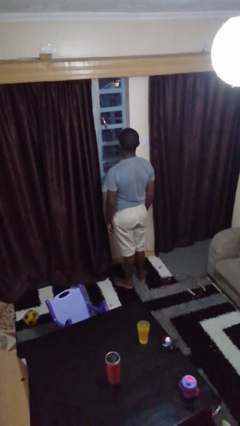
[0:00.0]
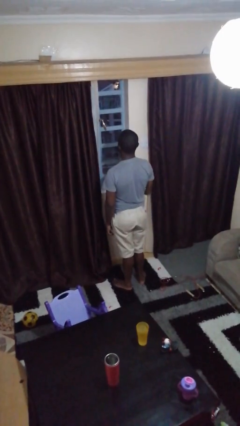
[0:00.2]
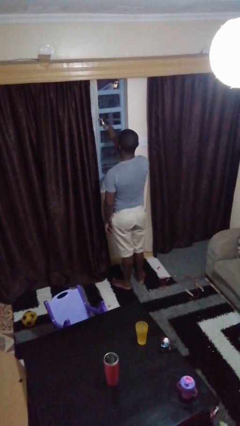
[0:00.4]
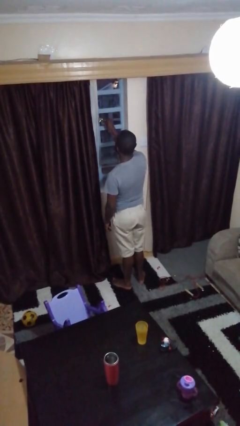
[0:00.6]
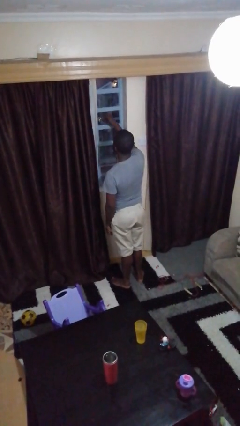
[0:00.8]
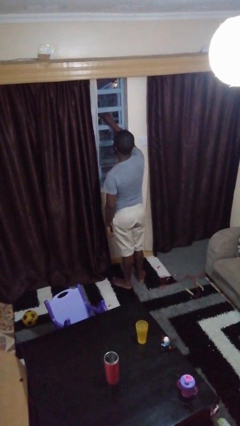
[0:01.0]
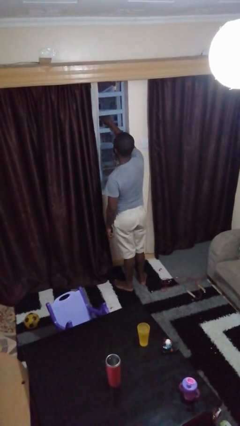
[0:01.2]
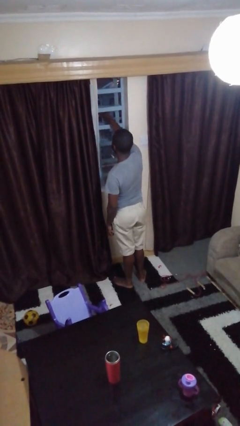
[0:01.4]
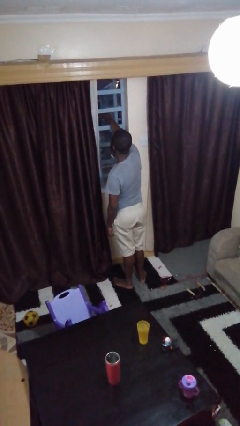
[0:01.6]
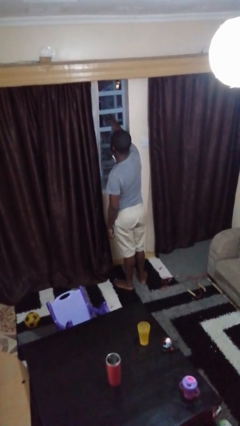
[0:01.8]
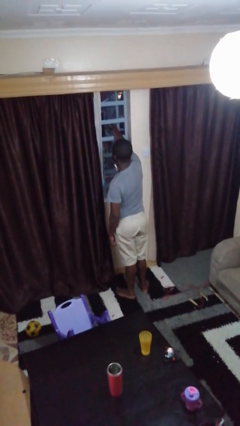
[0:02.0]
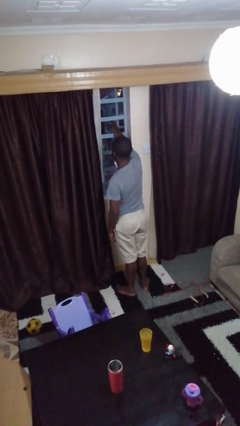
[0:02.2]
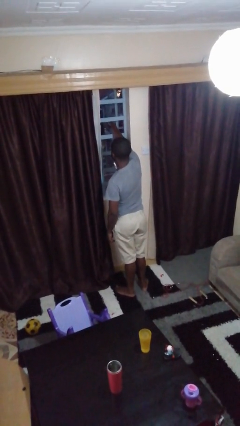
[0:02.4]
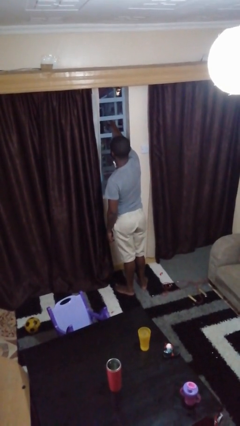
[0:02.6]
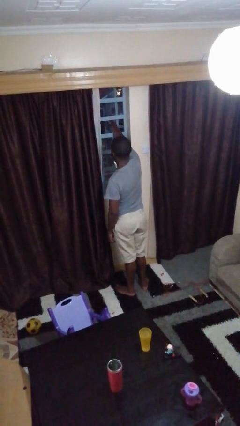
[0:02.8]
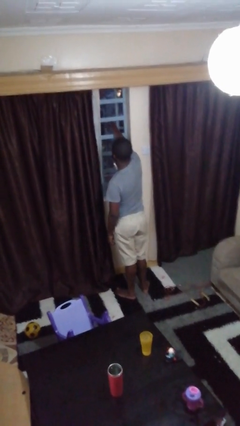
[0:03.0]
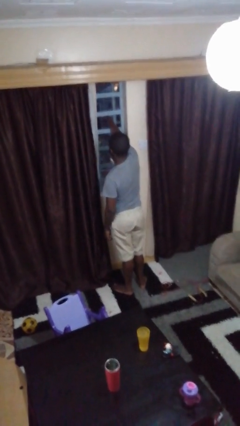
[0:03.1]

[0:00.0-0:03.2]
person opens home window

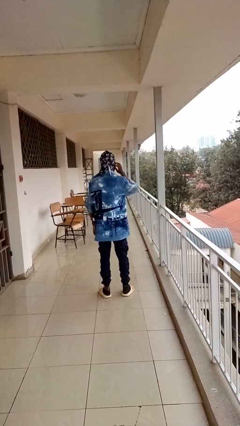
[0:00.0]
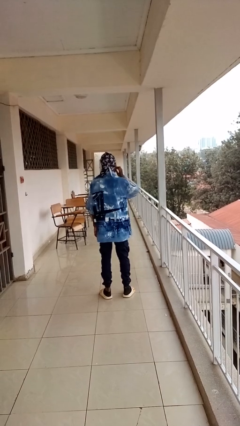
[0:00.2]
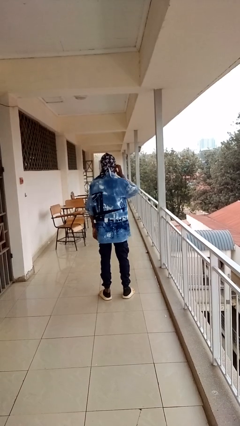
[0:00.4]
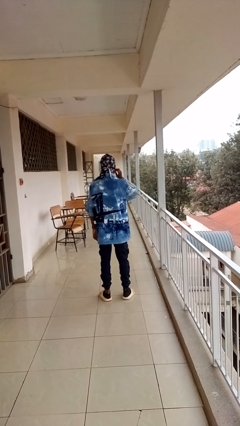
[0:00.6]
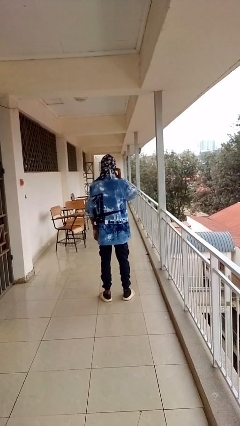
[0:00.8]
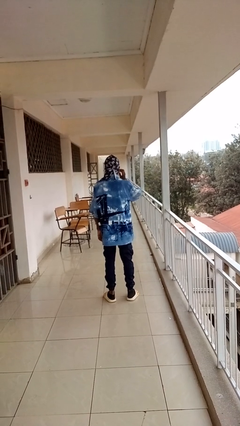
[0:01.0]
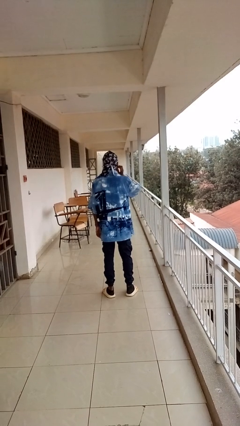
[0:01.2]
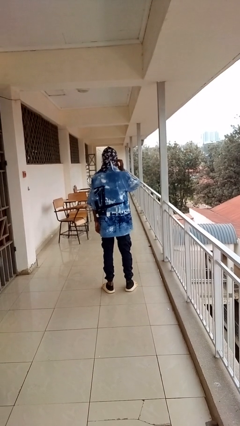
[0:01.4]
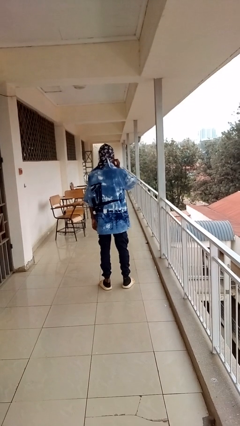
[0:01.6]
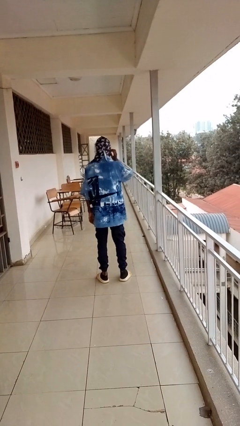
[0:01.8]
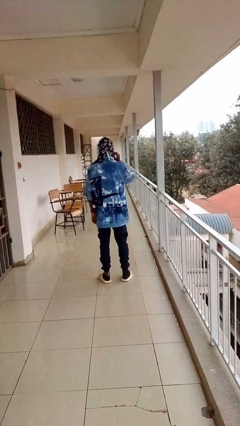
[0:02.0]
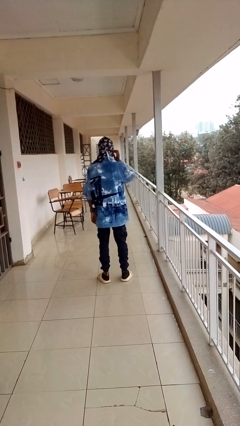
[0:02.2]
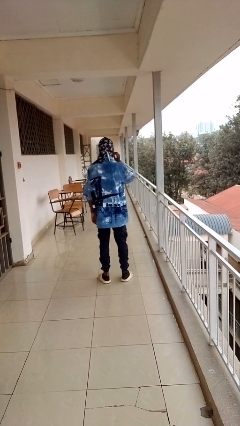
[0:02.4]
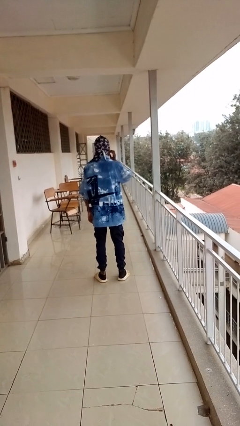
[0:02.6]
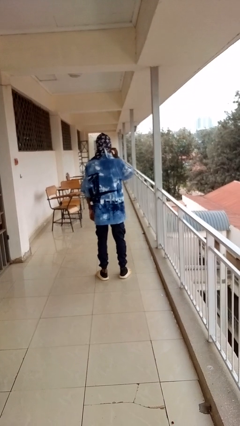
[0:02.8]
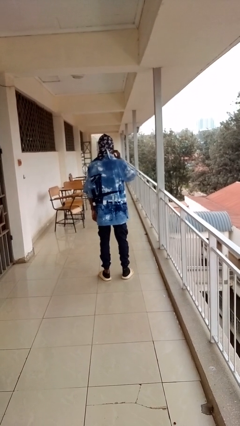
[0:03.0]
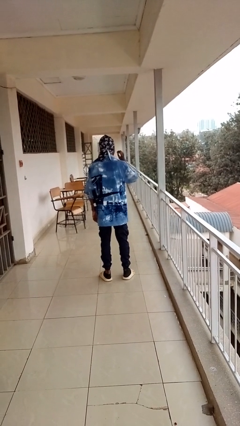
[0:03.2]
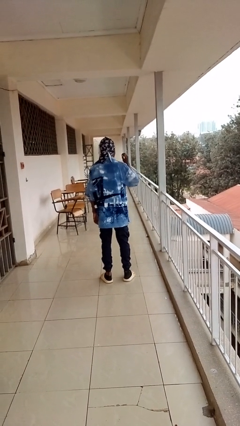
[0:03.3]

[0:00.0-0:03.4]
person scratches face

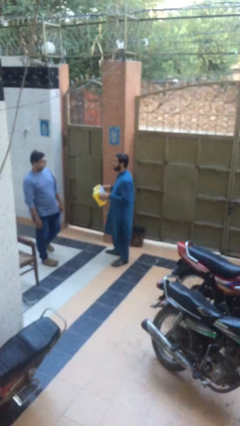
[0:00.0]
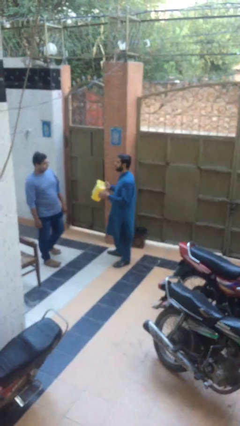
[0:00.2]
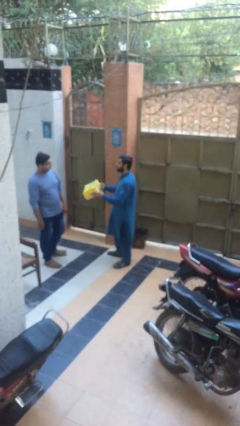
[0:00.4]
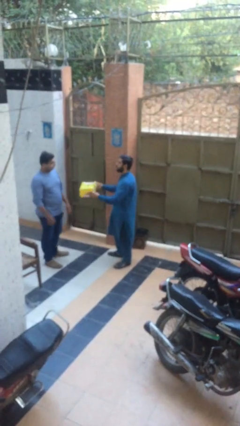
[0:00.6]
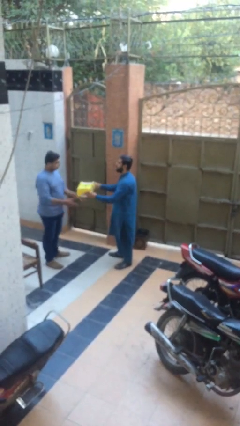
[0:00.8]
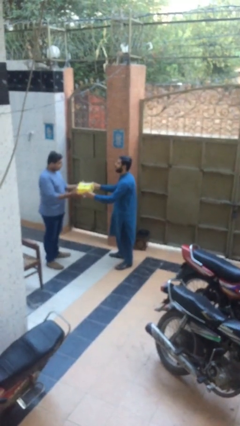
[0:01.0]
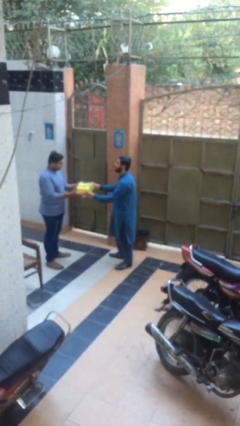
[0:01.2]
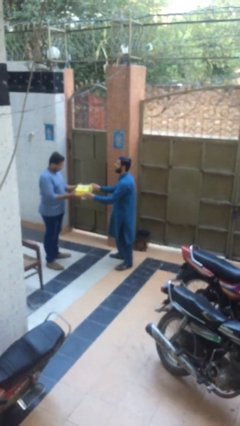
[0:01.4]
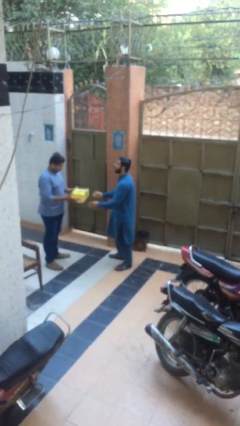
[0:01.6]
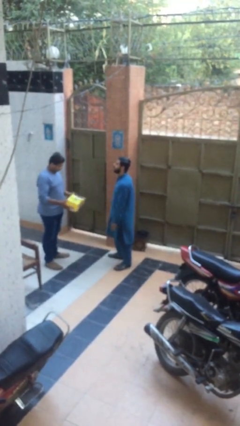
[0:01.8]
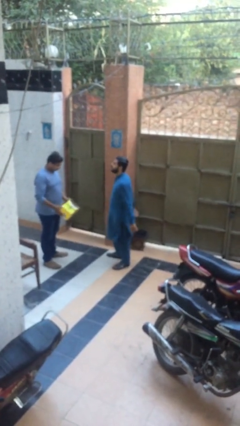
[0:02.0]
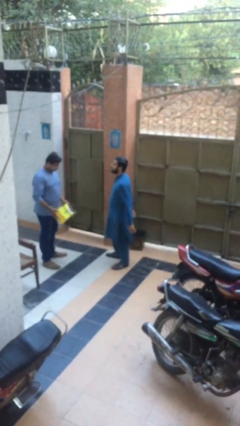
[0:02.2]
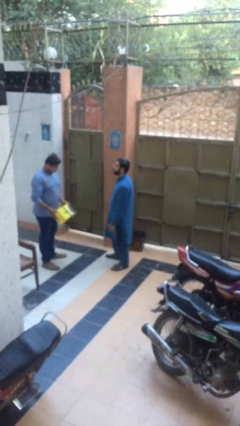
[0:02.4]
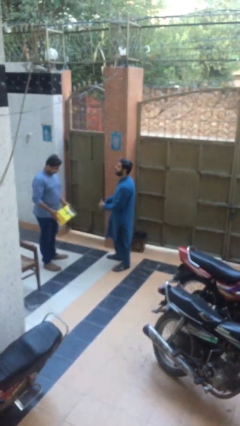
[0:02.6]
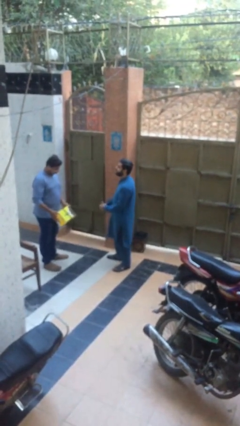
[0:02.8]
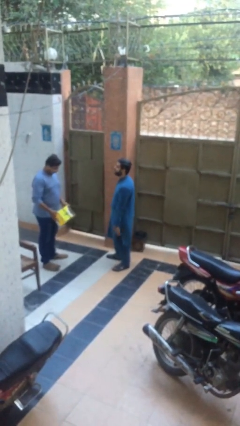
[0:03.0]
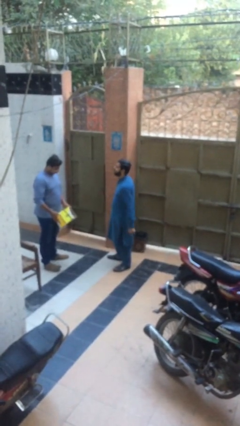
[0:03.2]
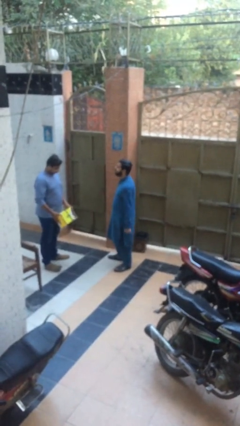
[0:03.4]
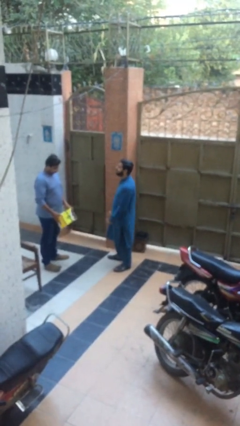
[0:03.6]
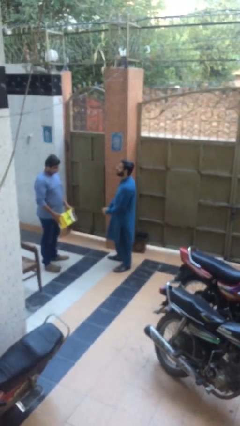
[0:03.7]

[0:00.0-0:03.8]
person transfers object to person

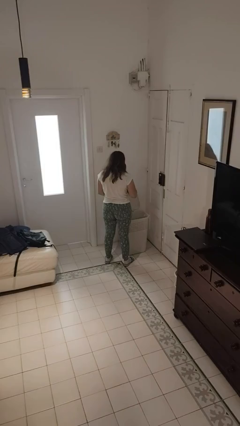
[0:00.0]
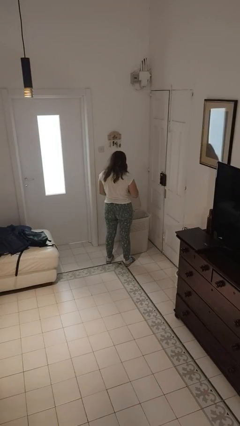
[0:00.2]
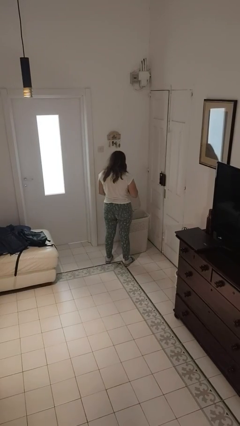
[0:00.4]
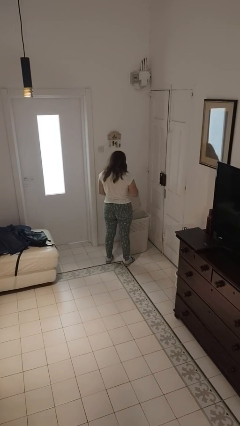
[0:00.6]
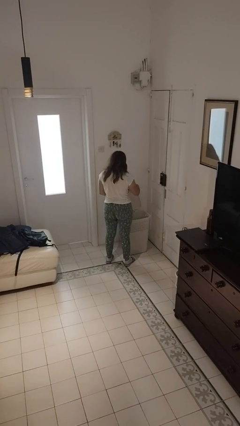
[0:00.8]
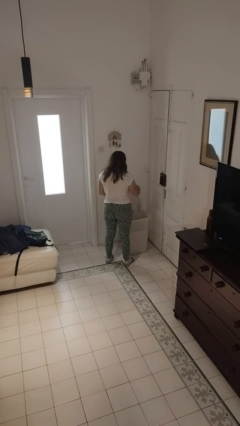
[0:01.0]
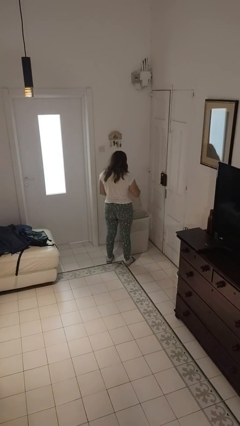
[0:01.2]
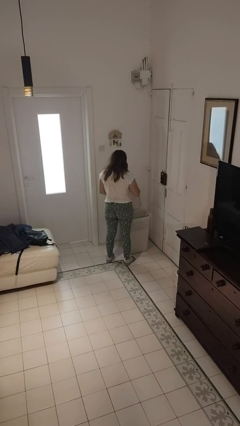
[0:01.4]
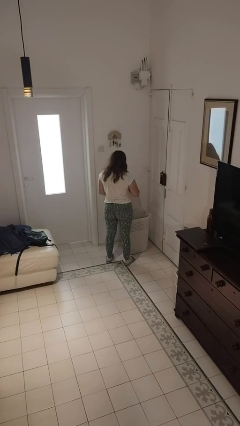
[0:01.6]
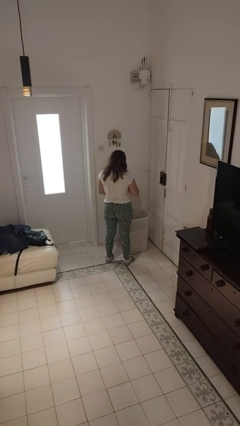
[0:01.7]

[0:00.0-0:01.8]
person discards trash

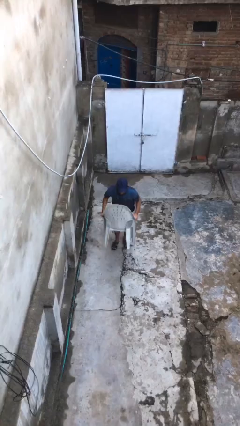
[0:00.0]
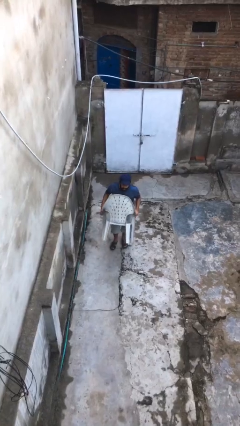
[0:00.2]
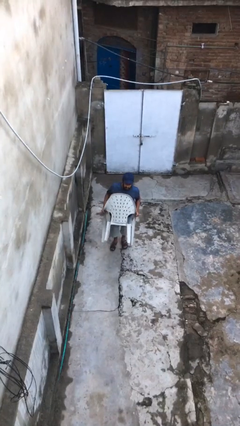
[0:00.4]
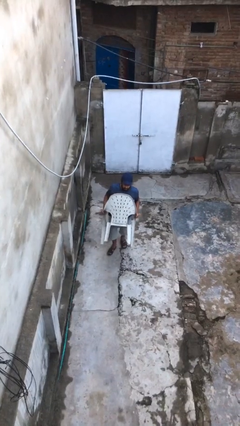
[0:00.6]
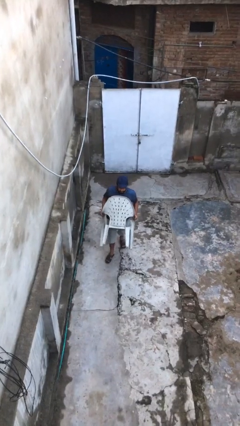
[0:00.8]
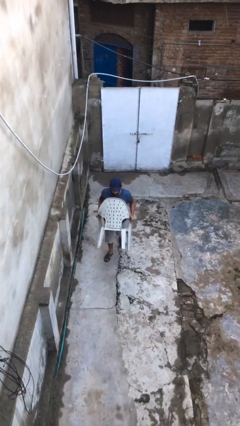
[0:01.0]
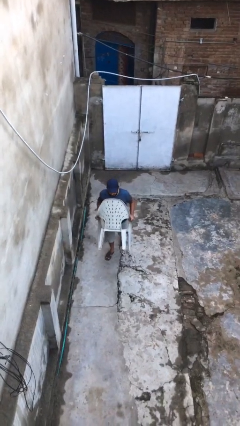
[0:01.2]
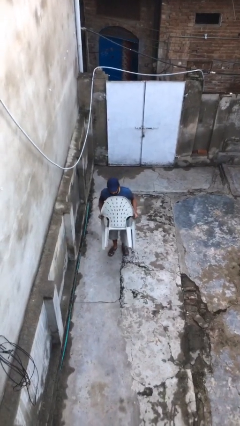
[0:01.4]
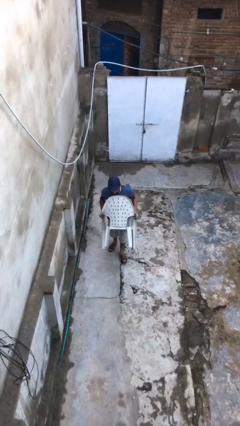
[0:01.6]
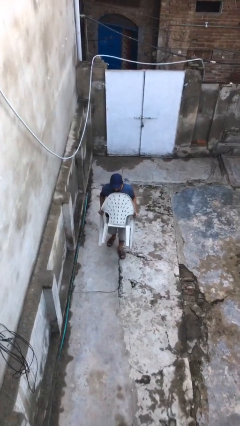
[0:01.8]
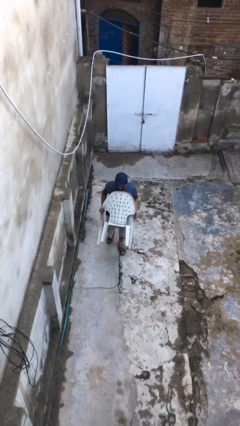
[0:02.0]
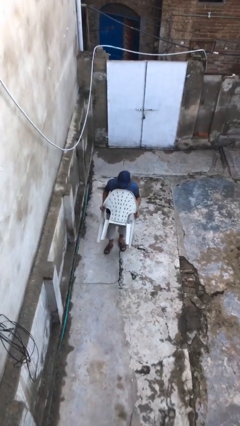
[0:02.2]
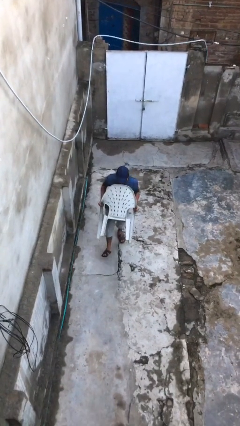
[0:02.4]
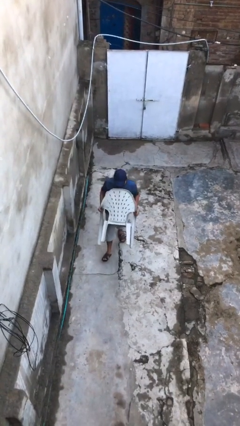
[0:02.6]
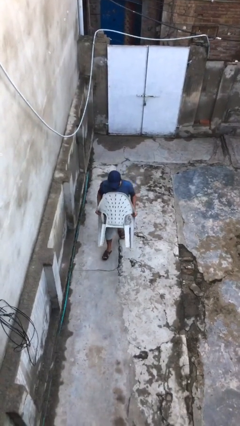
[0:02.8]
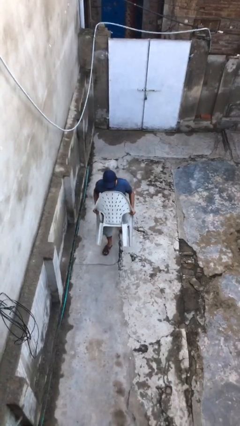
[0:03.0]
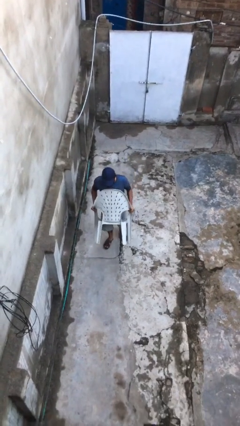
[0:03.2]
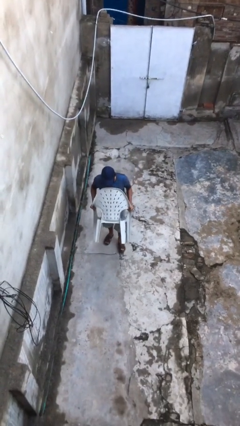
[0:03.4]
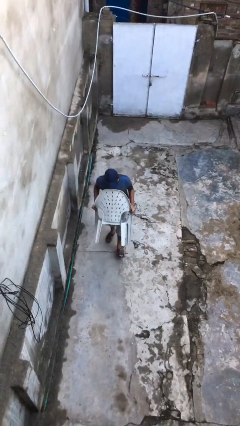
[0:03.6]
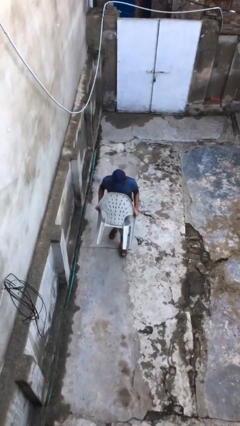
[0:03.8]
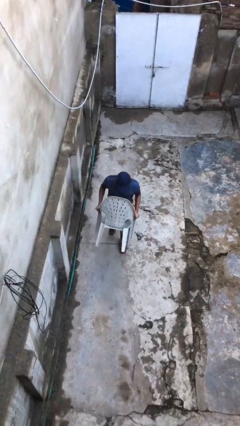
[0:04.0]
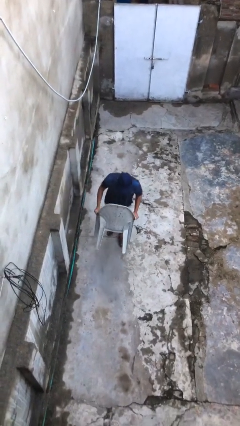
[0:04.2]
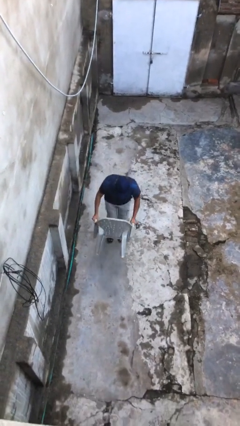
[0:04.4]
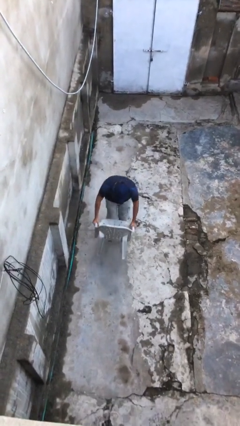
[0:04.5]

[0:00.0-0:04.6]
person carries heavy object

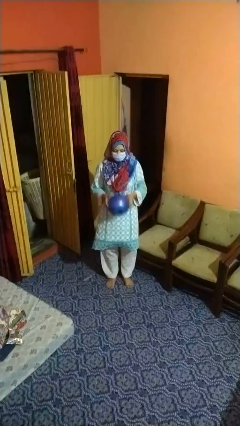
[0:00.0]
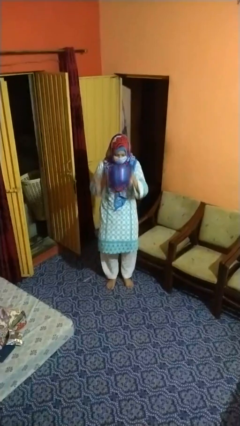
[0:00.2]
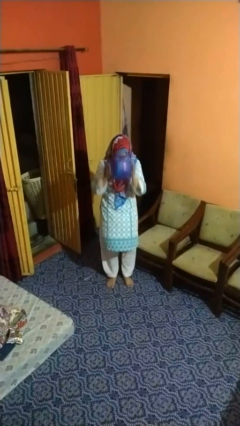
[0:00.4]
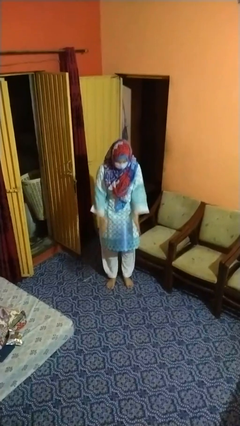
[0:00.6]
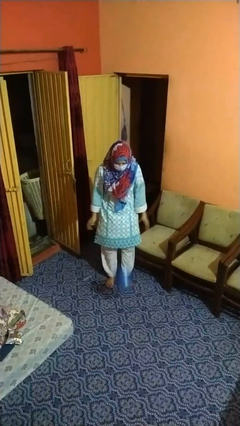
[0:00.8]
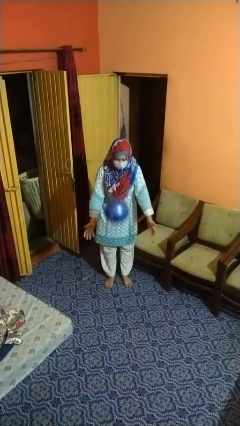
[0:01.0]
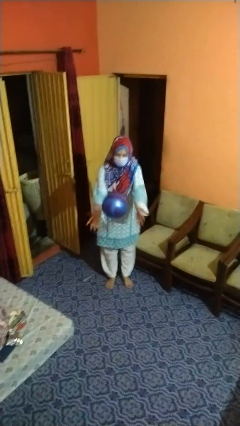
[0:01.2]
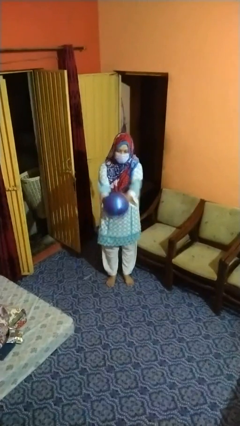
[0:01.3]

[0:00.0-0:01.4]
person bounces ball on floor
